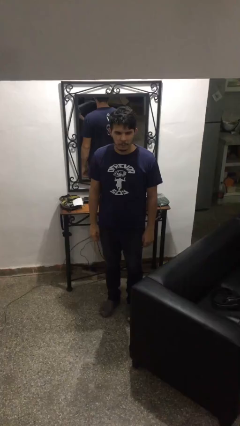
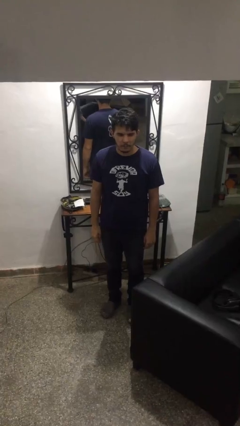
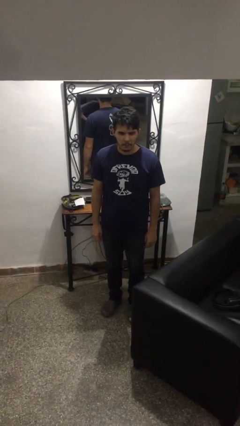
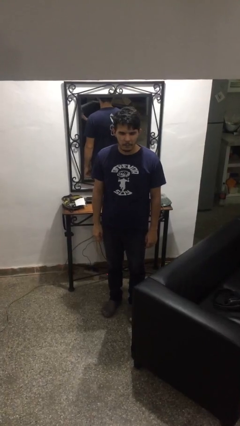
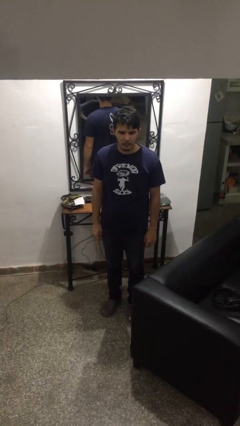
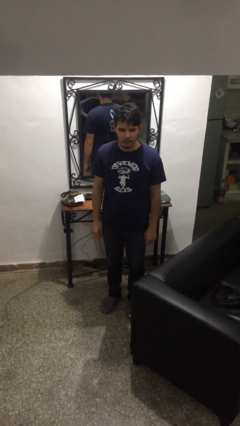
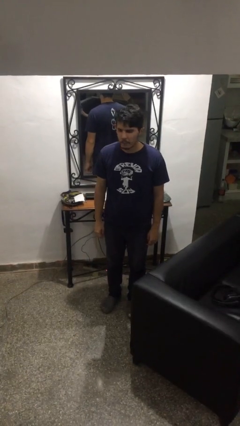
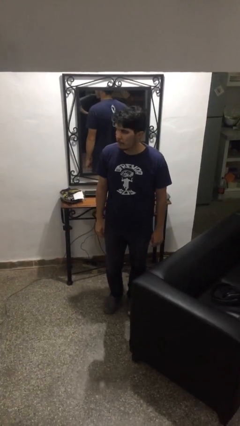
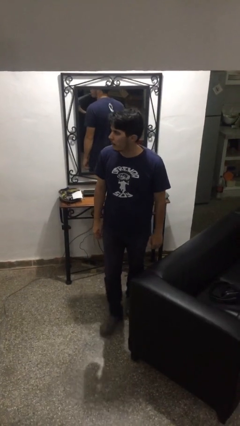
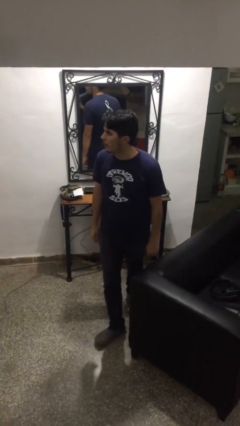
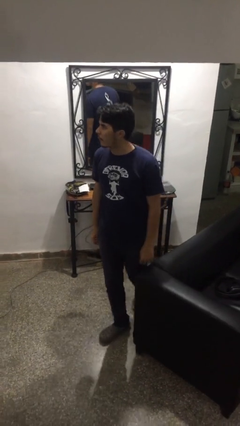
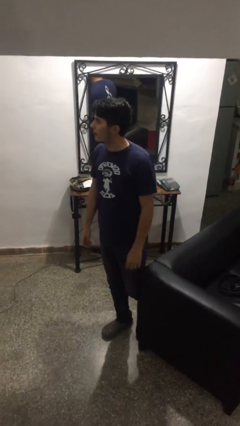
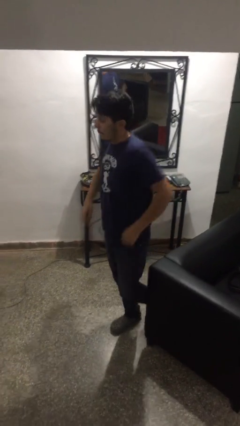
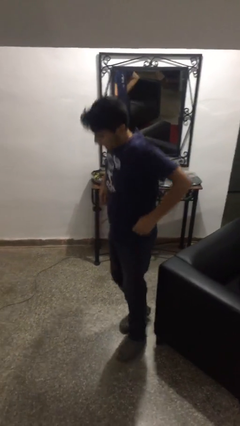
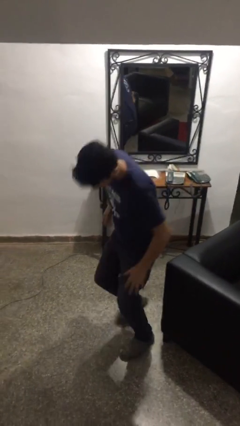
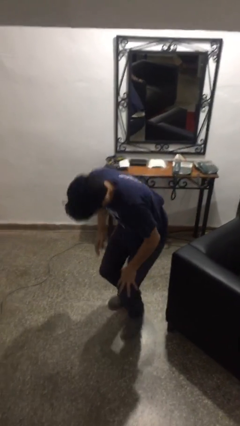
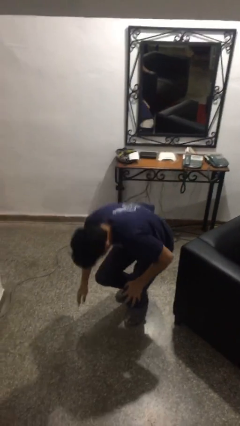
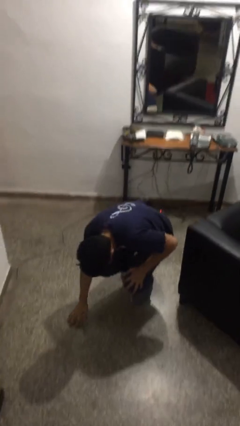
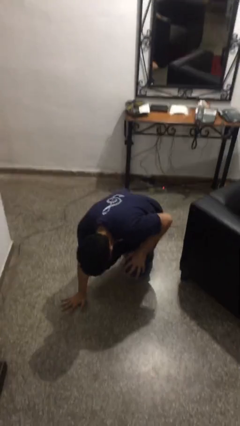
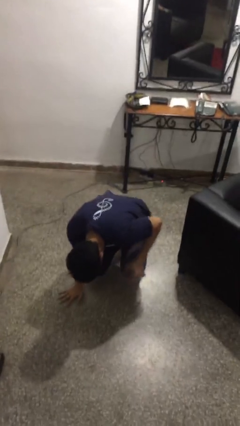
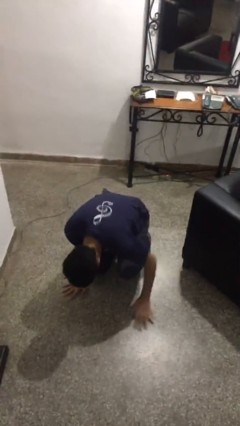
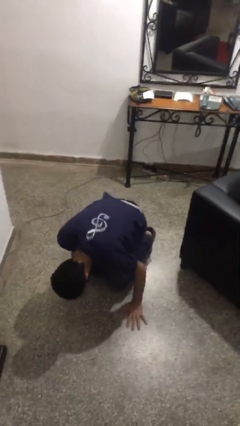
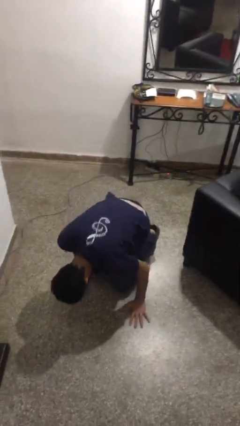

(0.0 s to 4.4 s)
person trips on object on floor

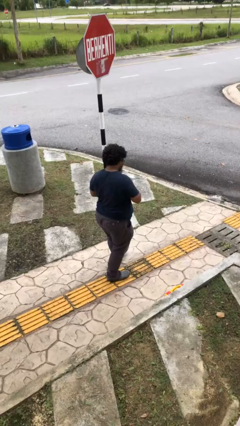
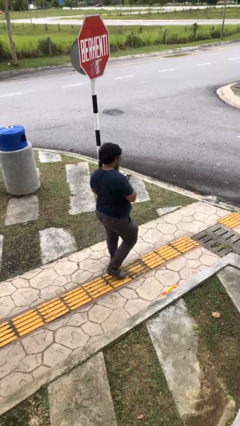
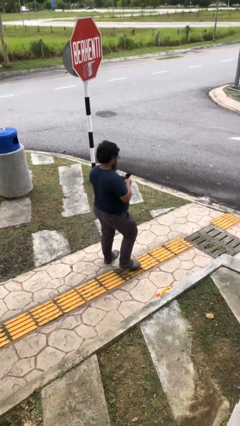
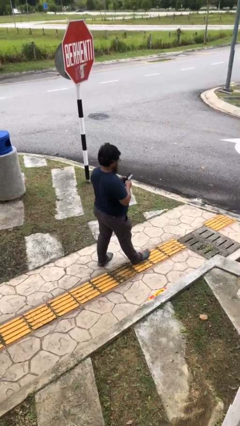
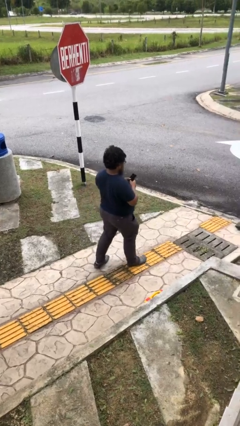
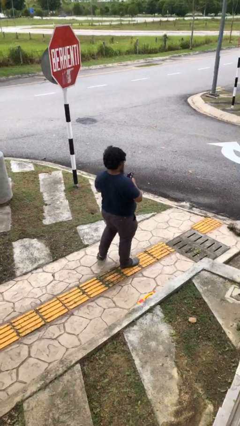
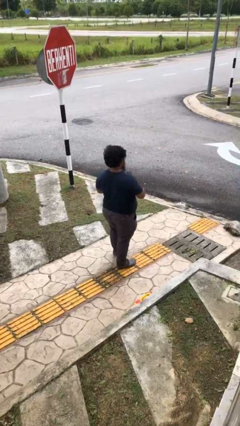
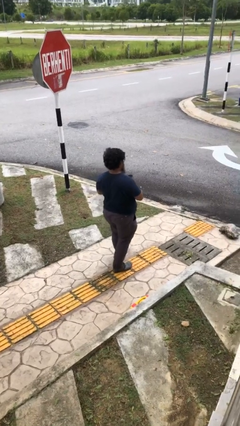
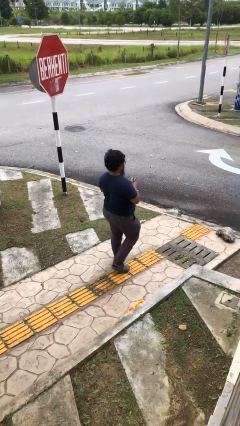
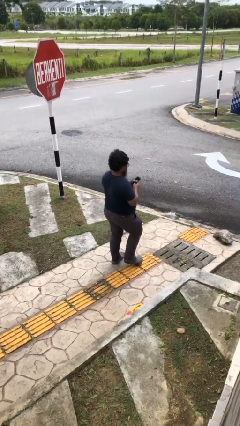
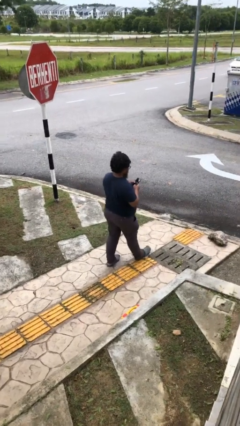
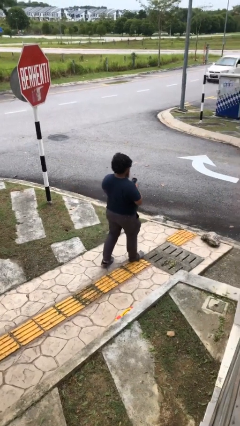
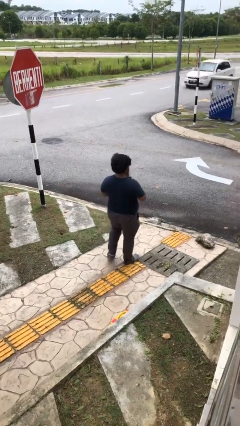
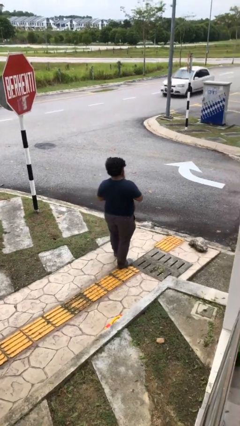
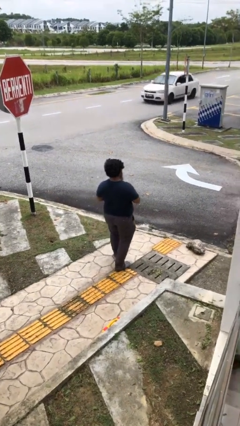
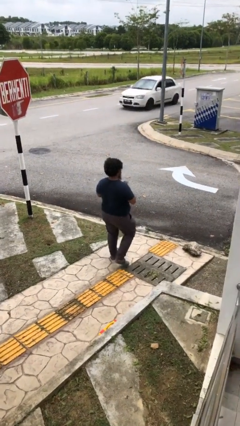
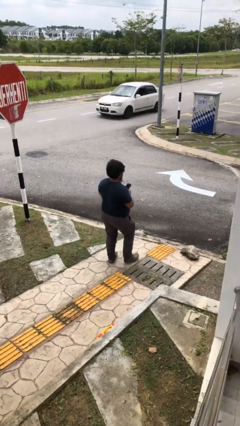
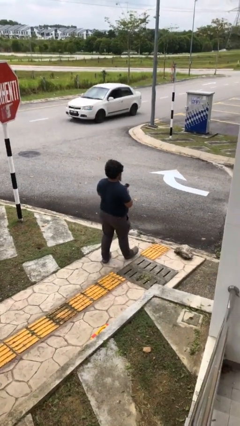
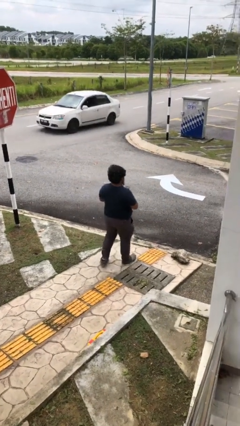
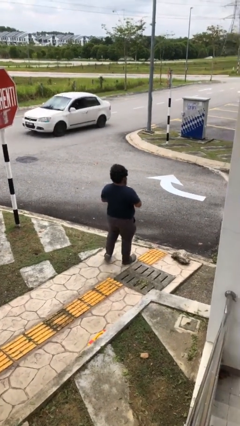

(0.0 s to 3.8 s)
person texts on phone

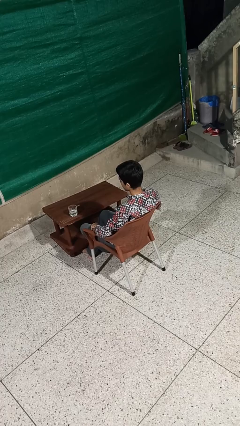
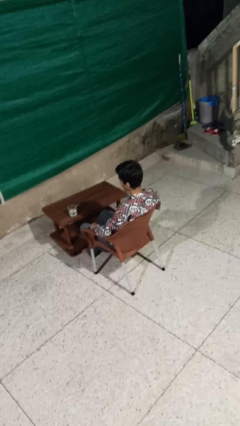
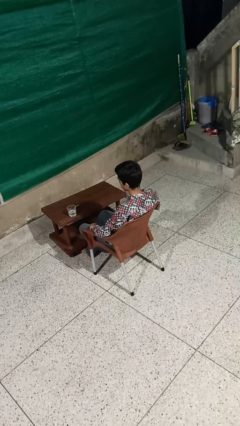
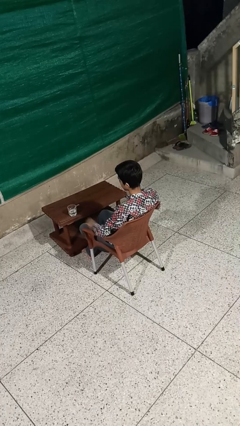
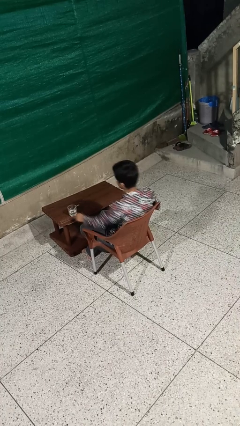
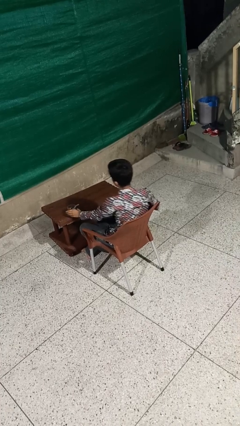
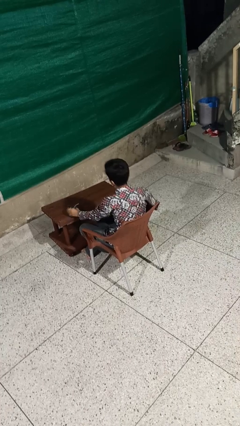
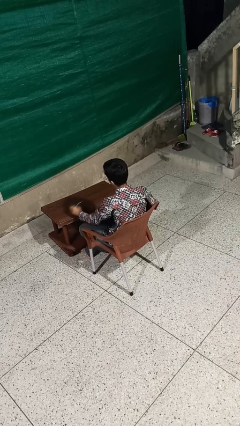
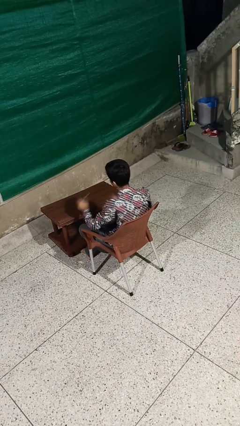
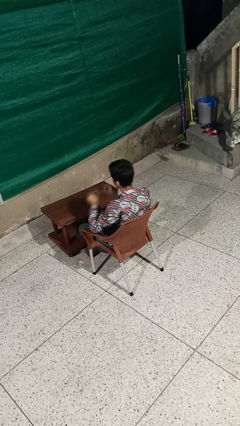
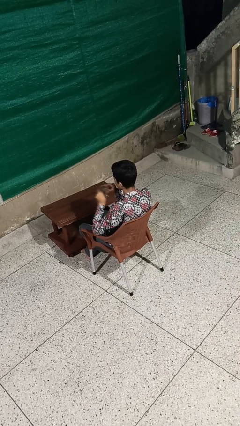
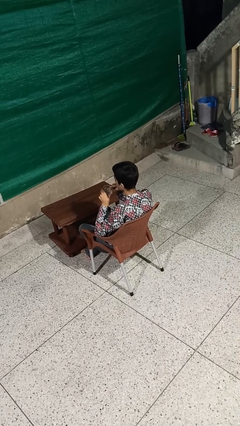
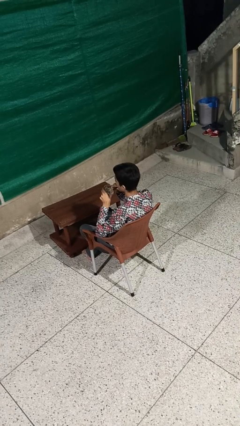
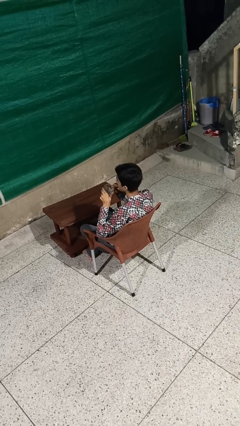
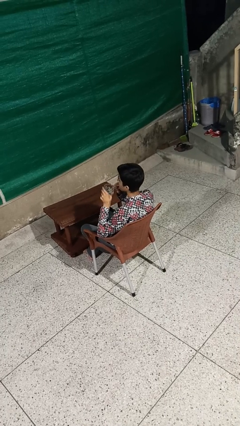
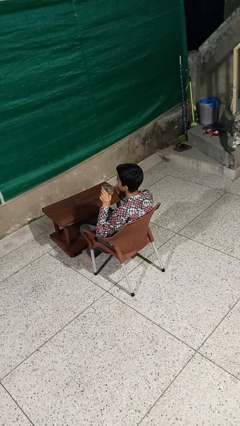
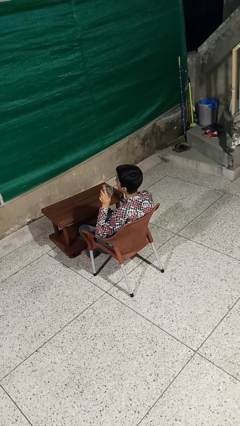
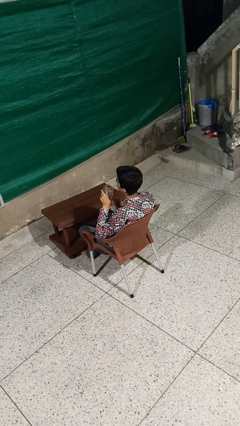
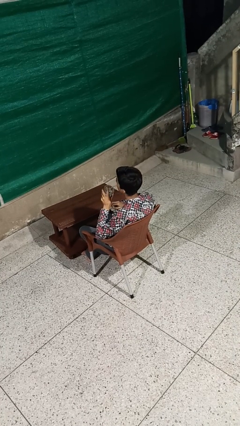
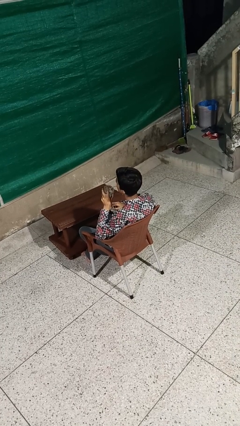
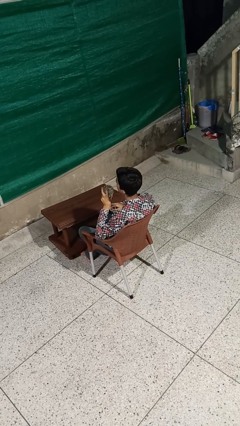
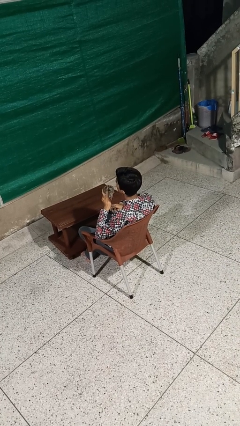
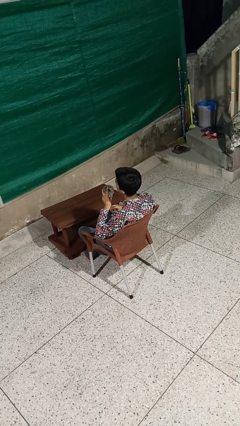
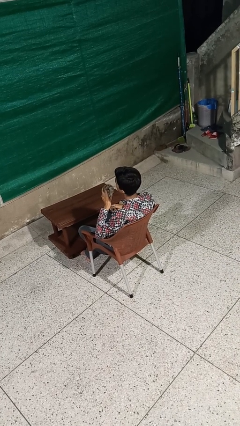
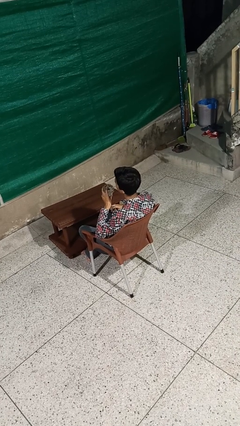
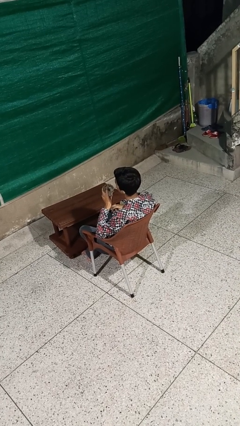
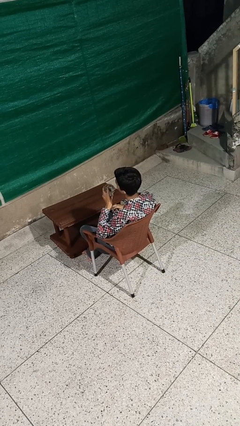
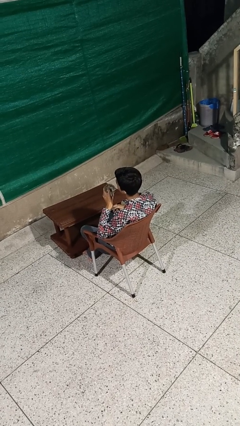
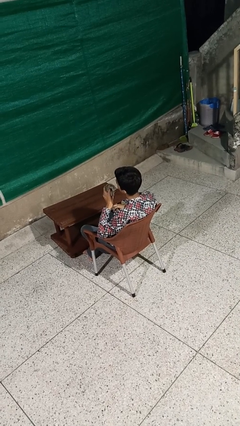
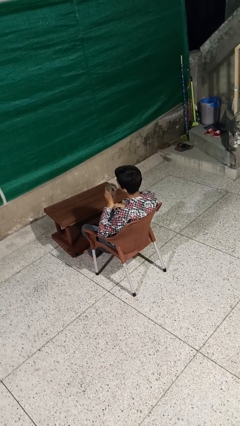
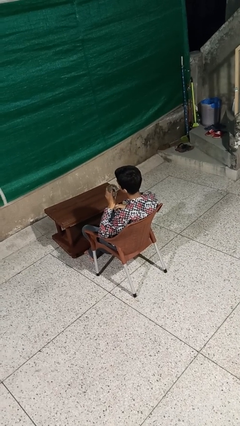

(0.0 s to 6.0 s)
person drinks from straw

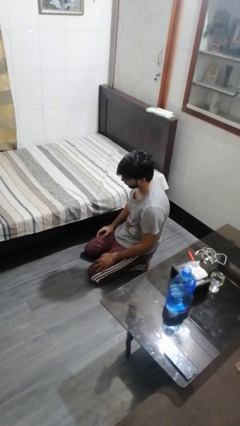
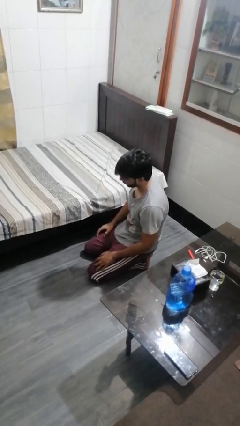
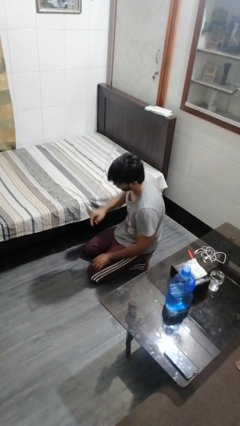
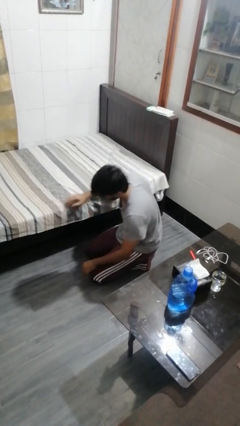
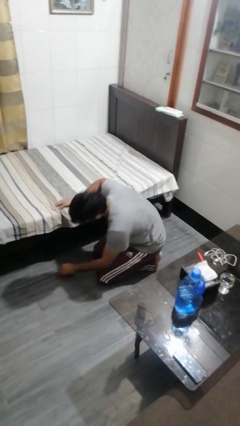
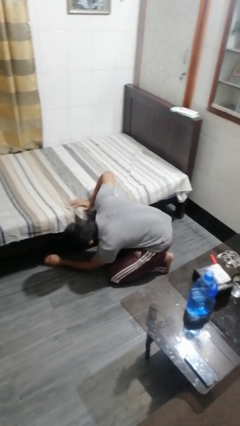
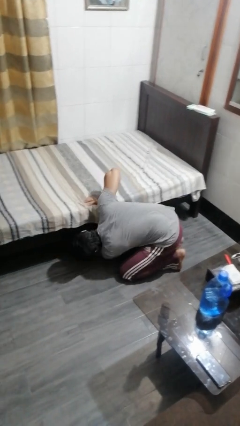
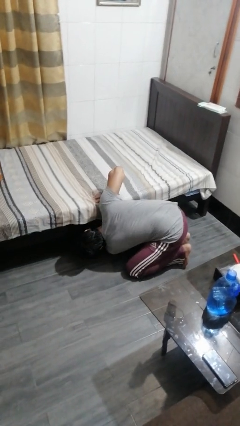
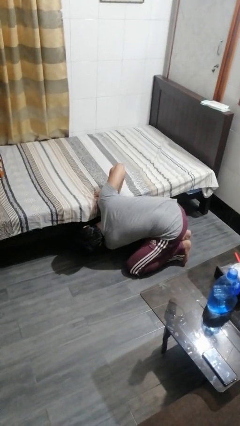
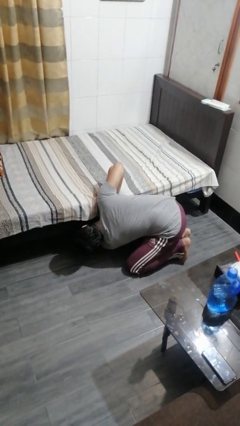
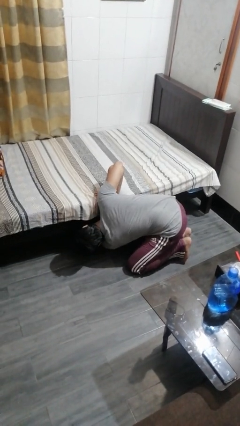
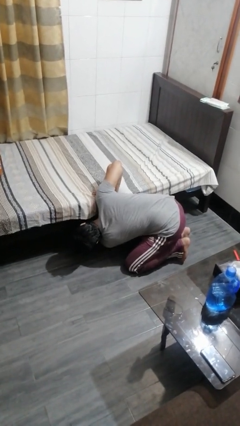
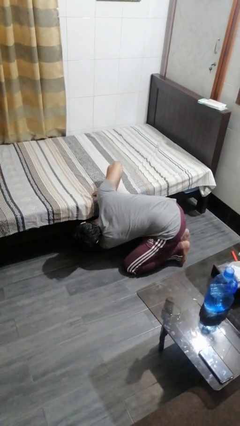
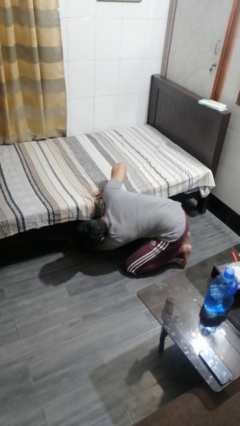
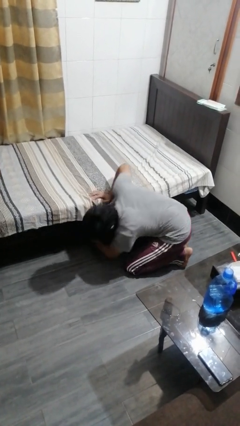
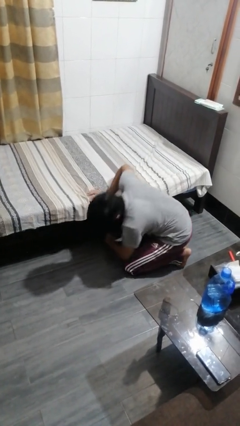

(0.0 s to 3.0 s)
person searches under bed

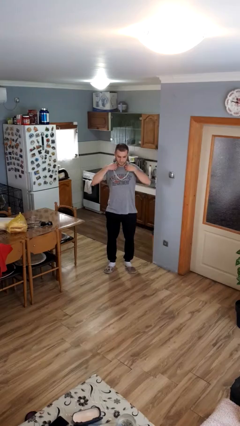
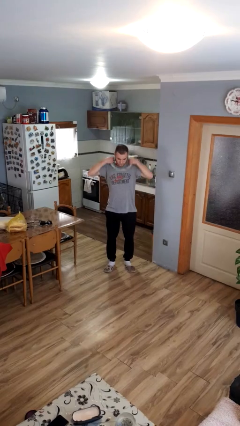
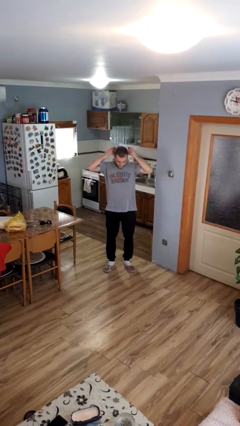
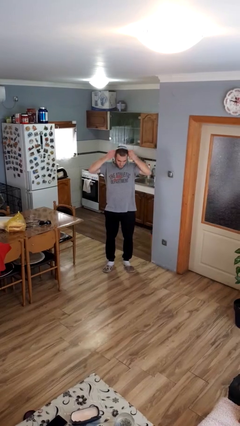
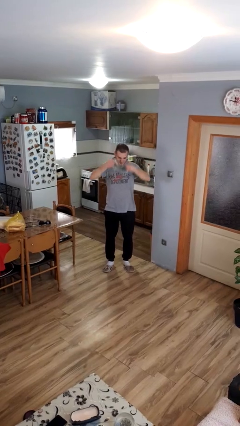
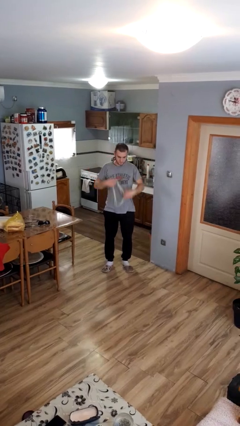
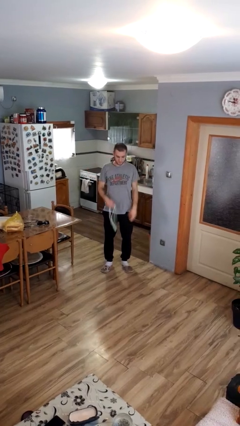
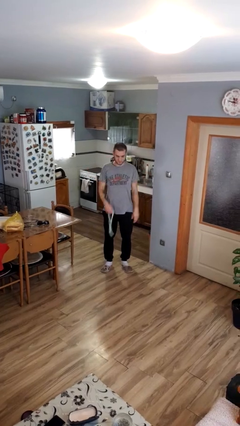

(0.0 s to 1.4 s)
person takes off necklace
